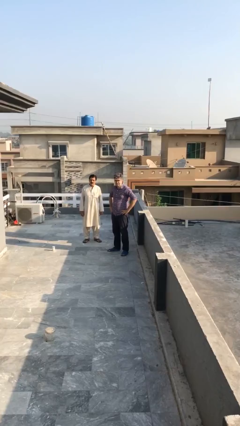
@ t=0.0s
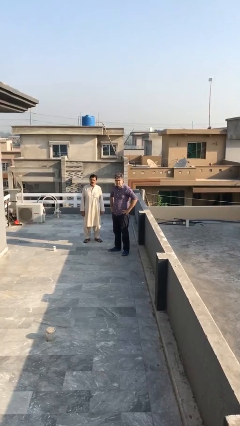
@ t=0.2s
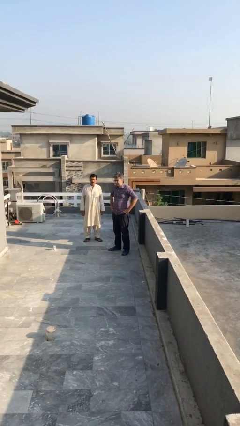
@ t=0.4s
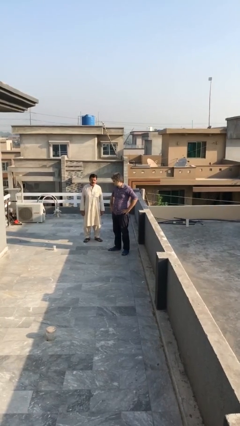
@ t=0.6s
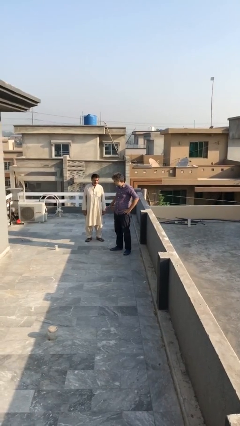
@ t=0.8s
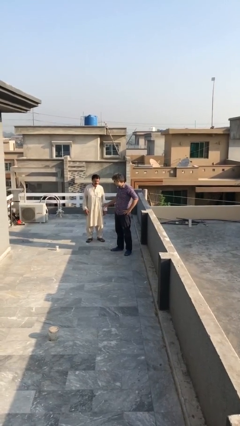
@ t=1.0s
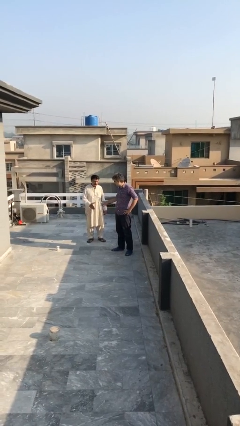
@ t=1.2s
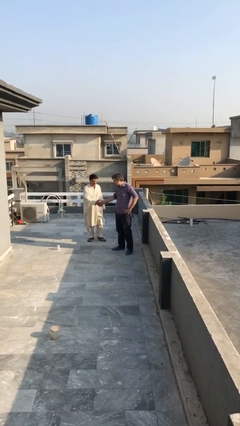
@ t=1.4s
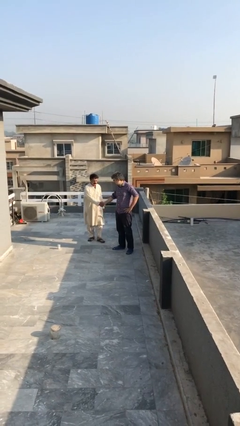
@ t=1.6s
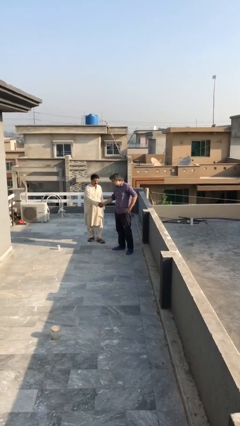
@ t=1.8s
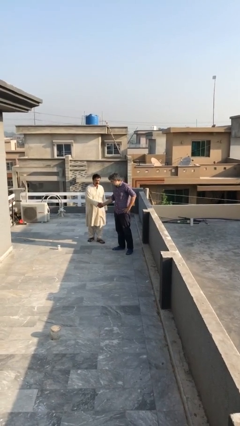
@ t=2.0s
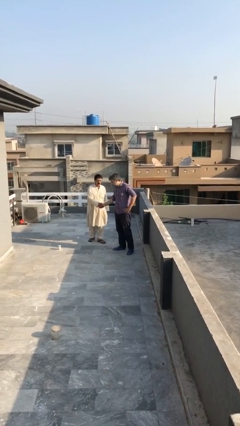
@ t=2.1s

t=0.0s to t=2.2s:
person shakes hand

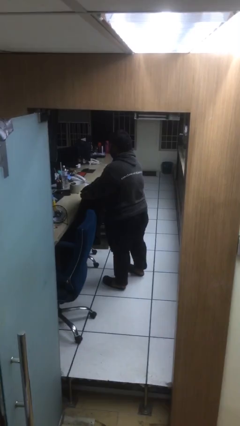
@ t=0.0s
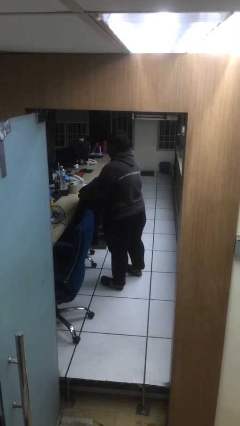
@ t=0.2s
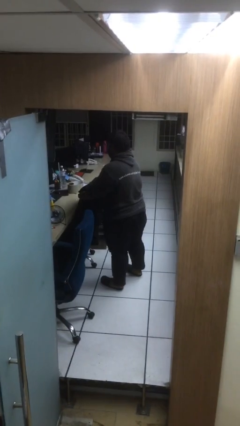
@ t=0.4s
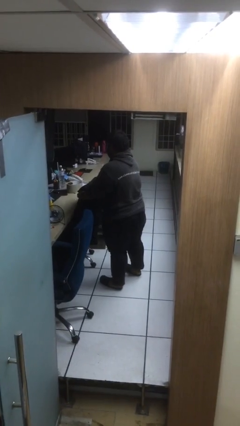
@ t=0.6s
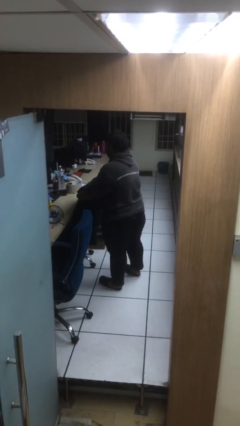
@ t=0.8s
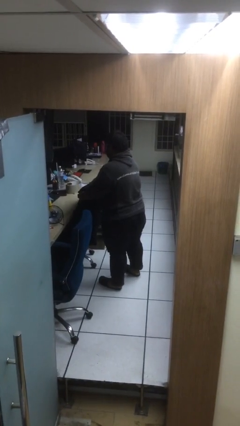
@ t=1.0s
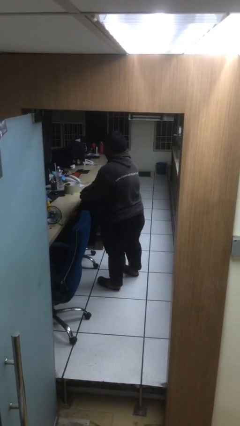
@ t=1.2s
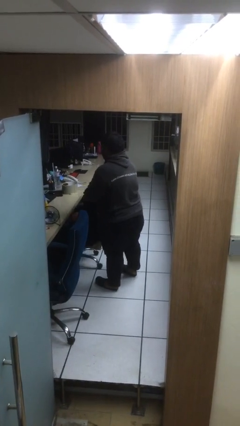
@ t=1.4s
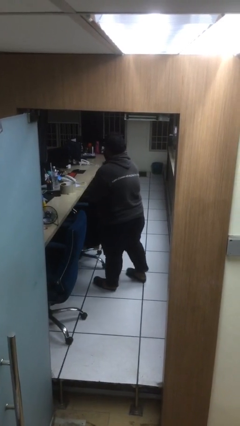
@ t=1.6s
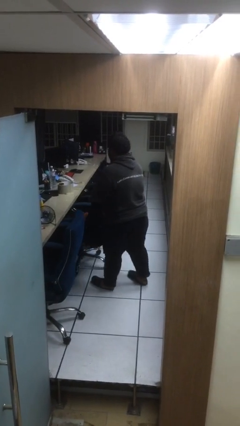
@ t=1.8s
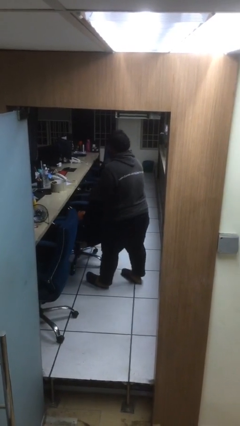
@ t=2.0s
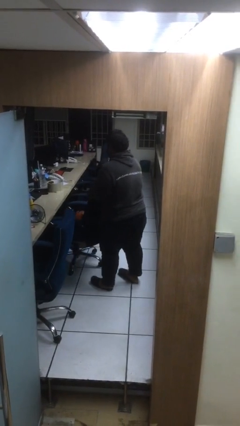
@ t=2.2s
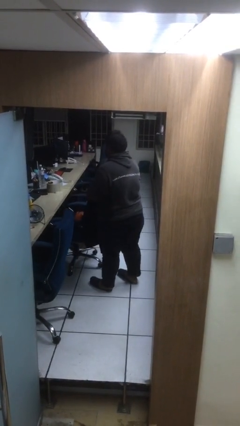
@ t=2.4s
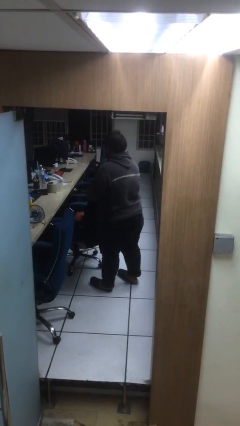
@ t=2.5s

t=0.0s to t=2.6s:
person pulls out chair

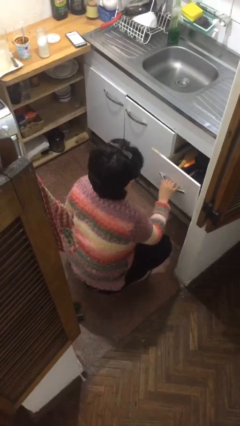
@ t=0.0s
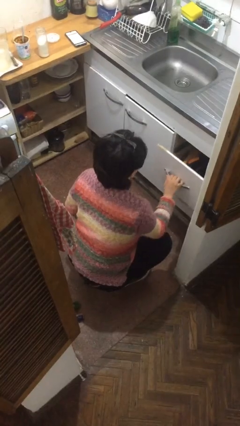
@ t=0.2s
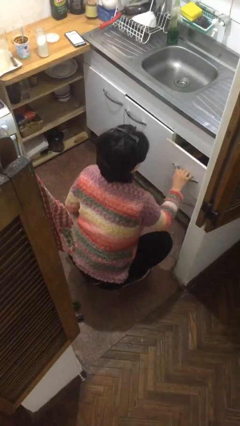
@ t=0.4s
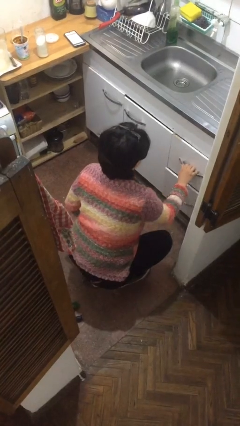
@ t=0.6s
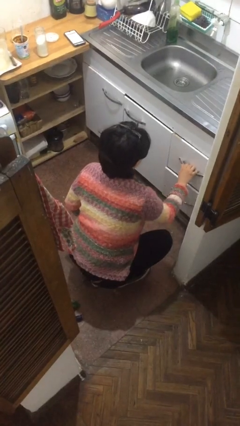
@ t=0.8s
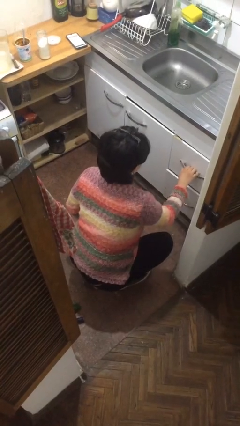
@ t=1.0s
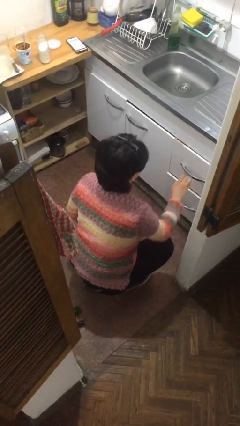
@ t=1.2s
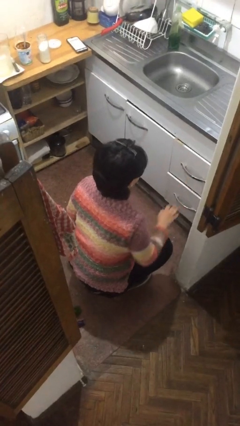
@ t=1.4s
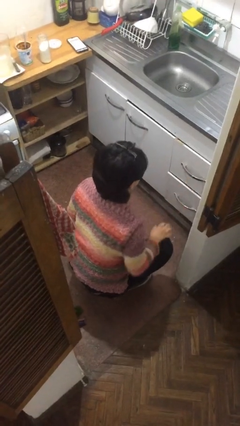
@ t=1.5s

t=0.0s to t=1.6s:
person closes kitchen drawer

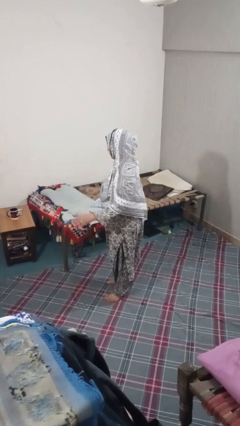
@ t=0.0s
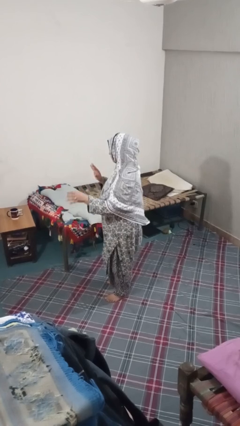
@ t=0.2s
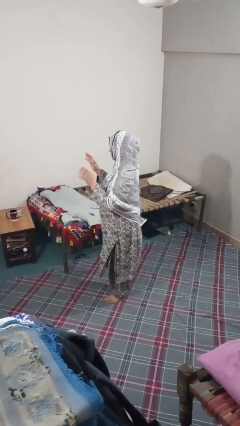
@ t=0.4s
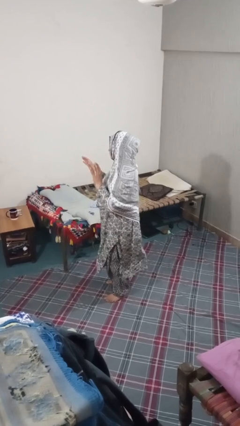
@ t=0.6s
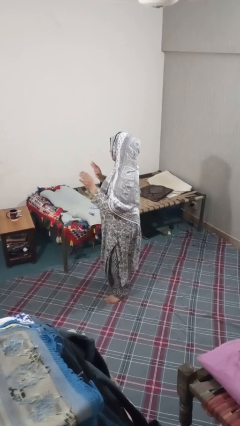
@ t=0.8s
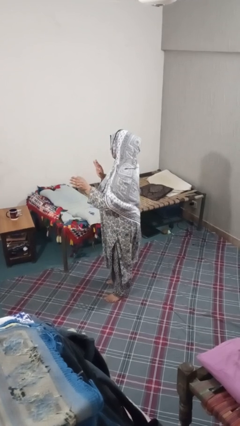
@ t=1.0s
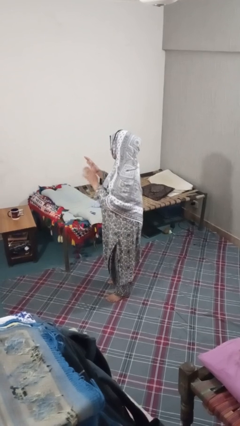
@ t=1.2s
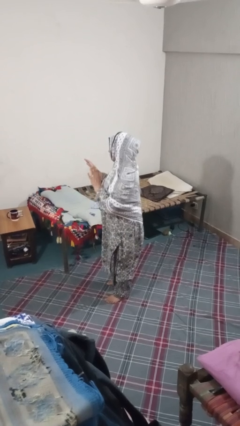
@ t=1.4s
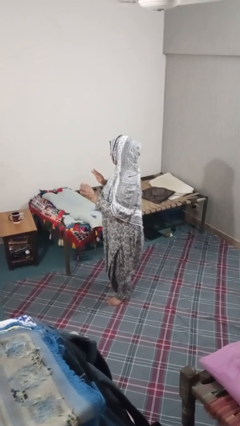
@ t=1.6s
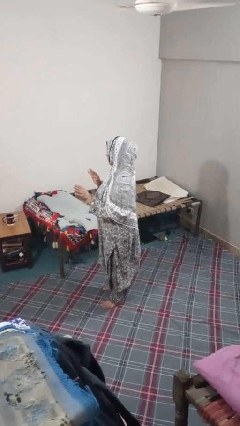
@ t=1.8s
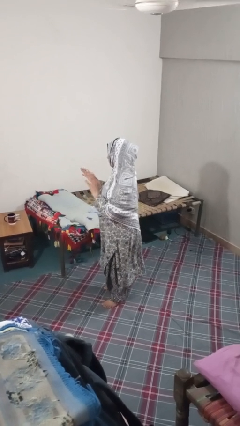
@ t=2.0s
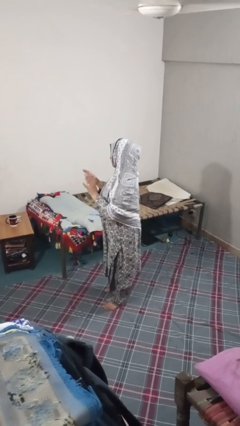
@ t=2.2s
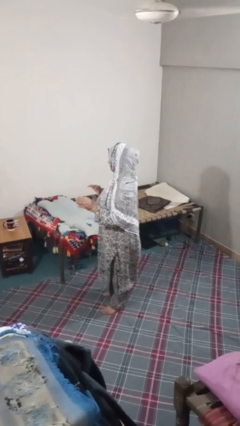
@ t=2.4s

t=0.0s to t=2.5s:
person dances in place

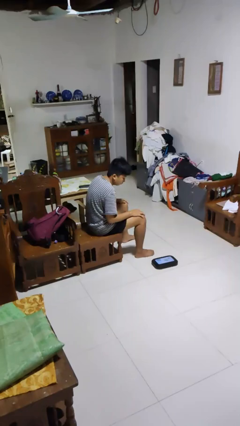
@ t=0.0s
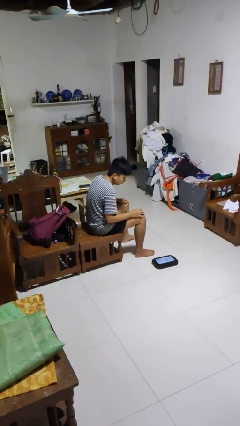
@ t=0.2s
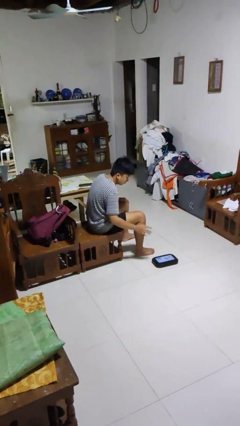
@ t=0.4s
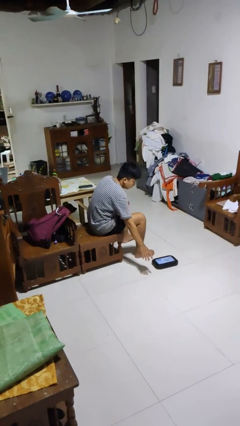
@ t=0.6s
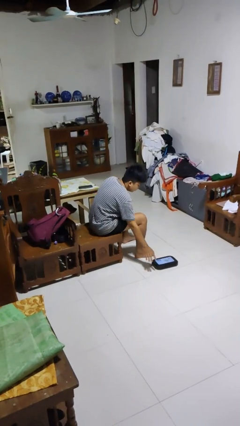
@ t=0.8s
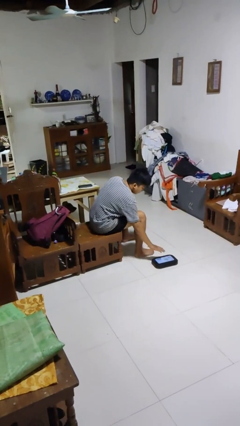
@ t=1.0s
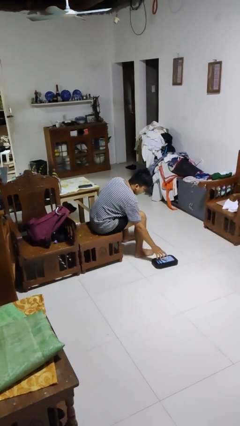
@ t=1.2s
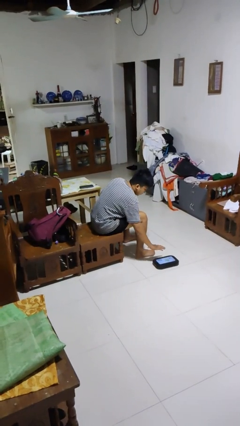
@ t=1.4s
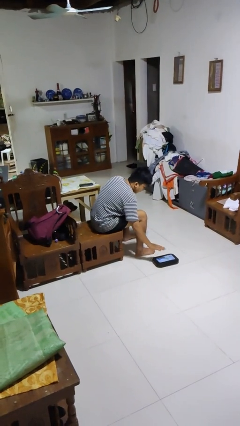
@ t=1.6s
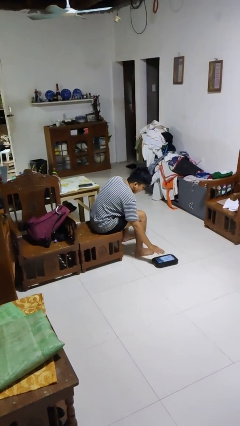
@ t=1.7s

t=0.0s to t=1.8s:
person waves hand over object

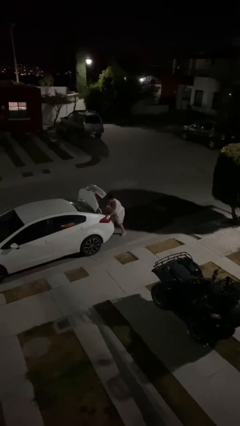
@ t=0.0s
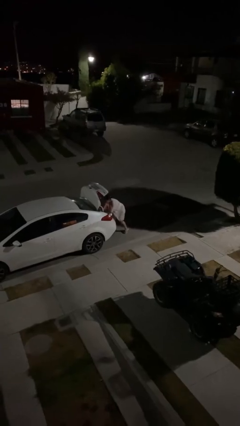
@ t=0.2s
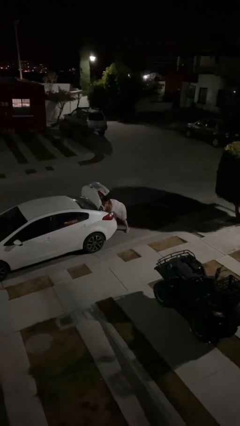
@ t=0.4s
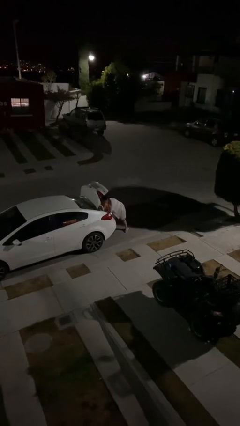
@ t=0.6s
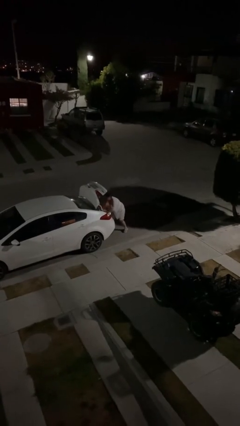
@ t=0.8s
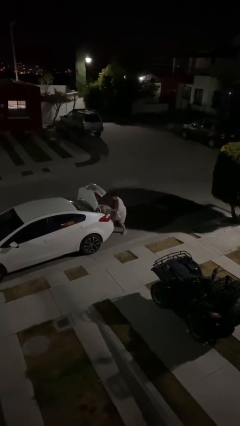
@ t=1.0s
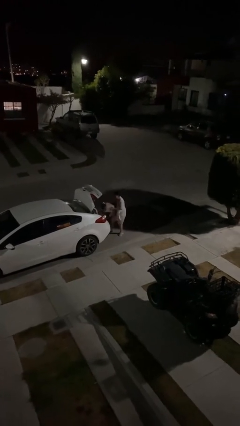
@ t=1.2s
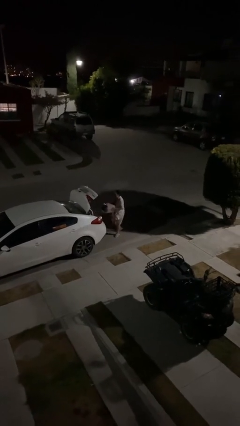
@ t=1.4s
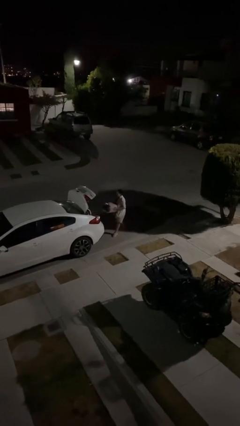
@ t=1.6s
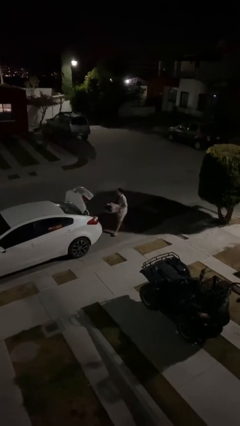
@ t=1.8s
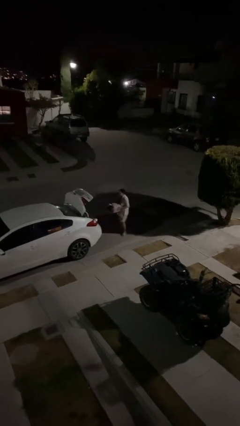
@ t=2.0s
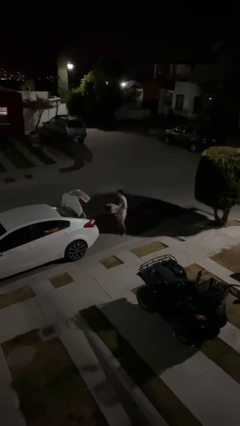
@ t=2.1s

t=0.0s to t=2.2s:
person unloads car

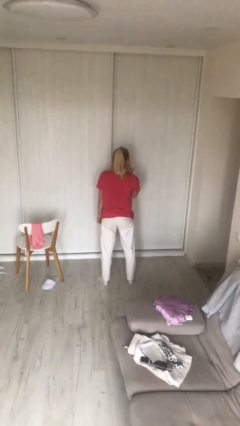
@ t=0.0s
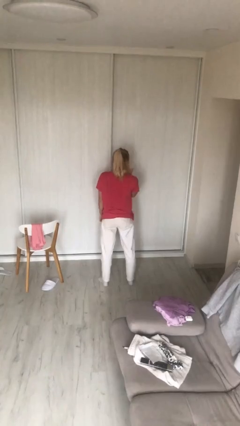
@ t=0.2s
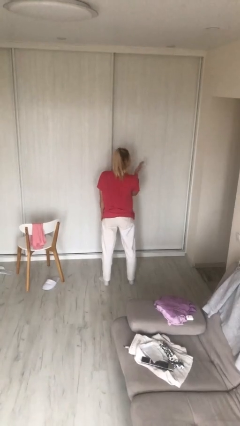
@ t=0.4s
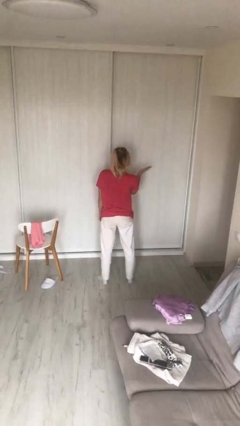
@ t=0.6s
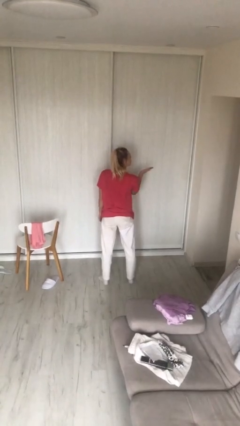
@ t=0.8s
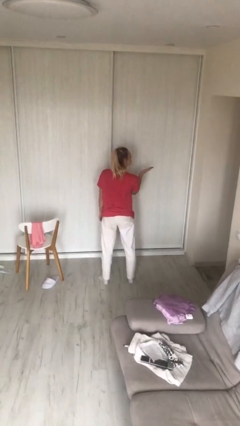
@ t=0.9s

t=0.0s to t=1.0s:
person gestures blow kiss

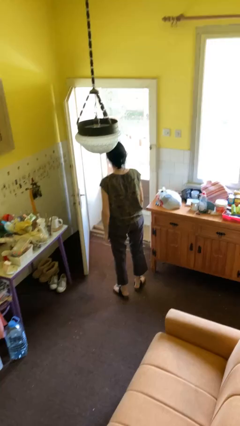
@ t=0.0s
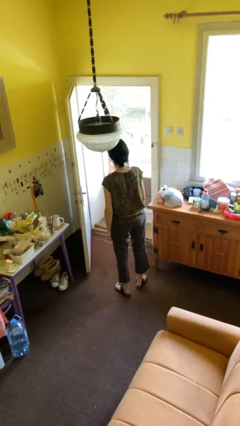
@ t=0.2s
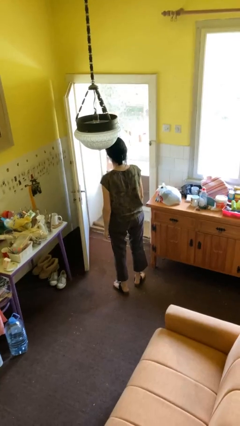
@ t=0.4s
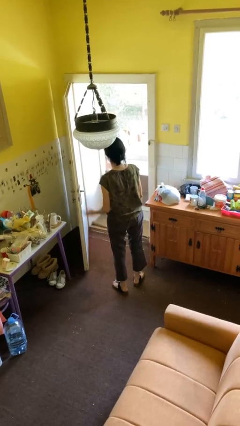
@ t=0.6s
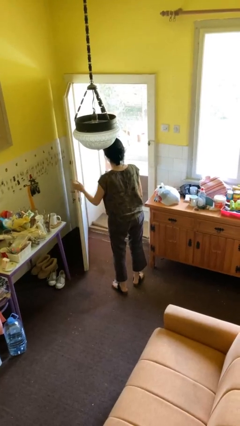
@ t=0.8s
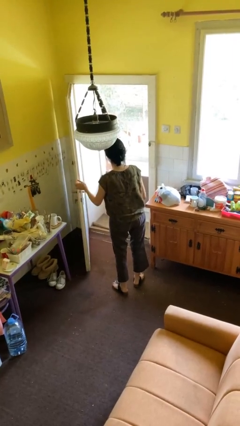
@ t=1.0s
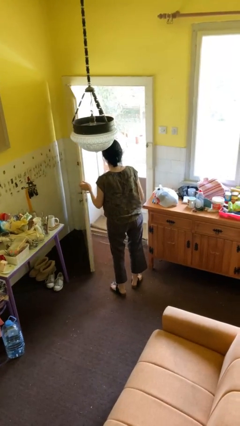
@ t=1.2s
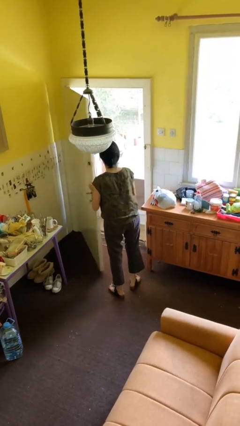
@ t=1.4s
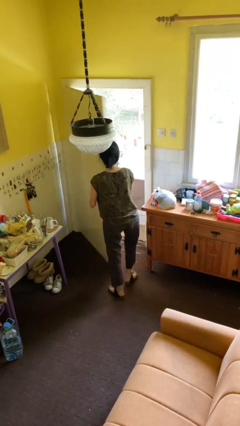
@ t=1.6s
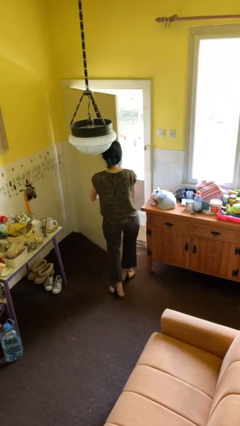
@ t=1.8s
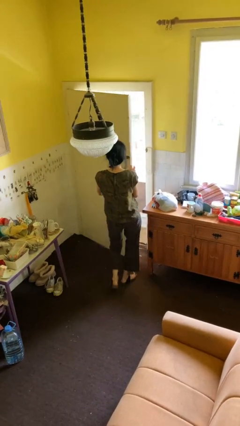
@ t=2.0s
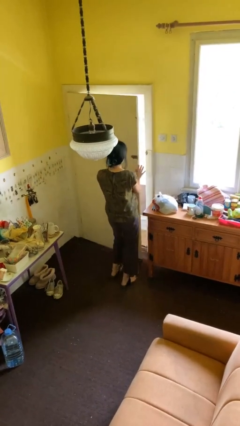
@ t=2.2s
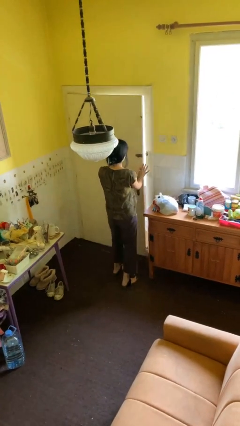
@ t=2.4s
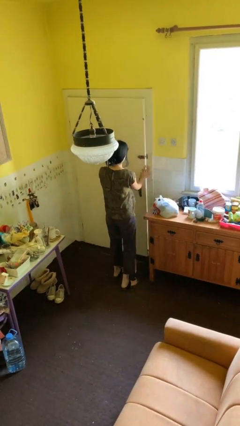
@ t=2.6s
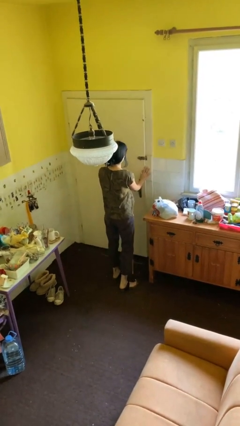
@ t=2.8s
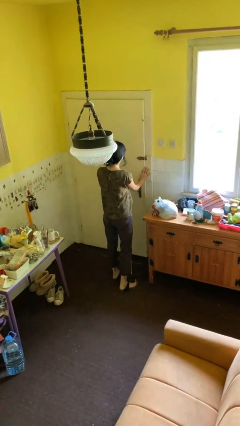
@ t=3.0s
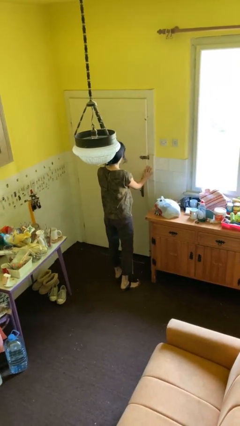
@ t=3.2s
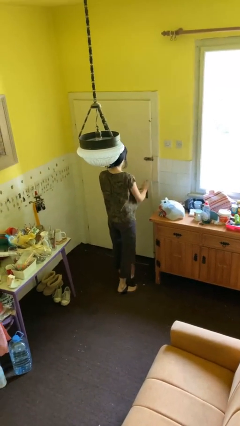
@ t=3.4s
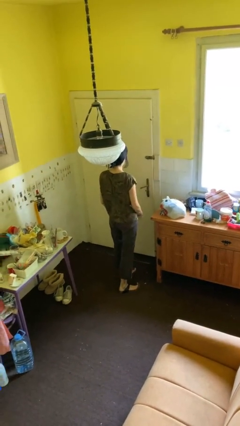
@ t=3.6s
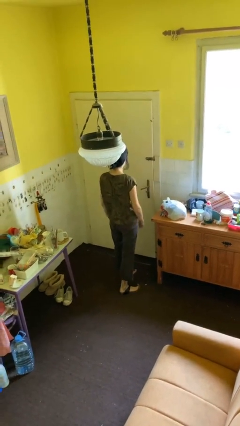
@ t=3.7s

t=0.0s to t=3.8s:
person closes facility door
